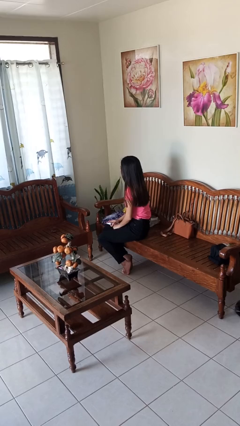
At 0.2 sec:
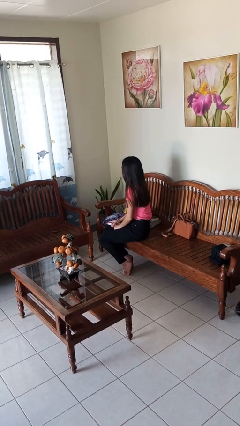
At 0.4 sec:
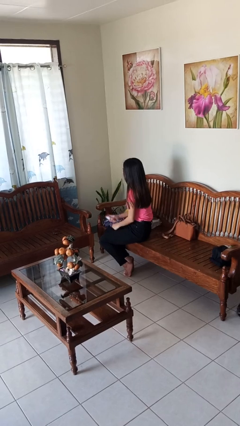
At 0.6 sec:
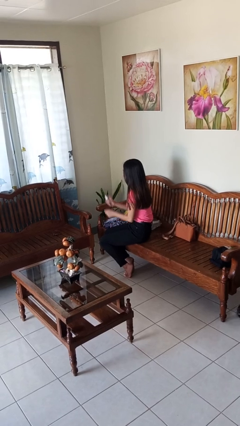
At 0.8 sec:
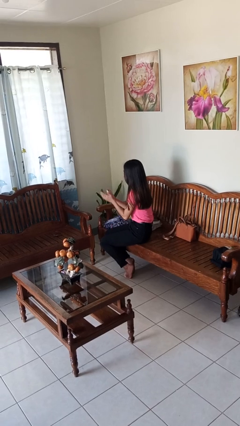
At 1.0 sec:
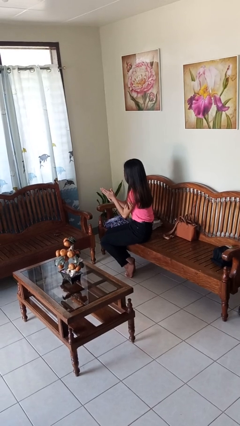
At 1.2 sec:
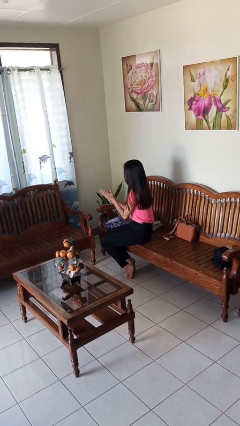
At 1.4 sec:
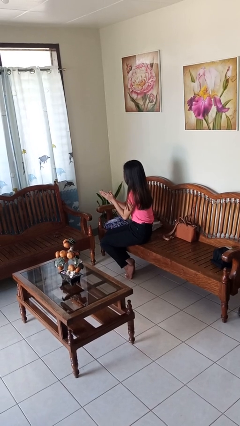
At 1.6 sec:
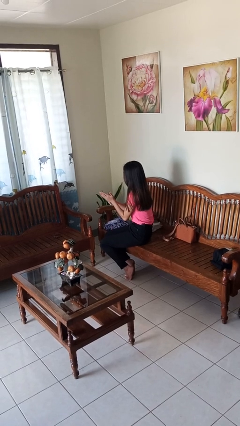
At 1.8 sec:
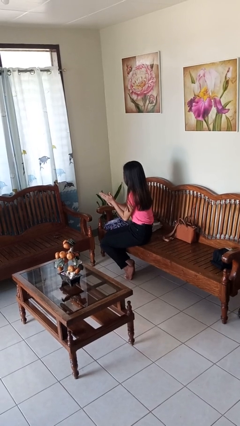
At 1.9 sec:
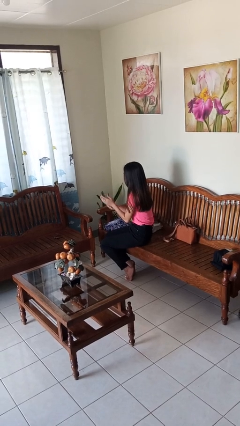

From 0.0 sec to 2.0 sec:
person sprays from bottle

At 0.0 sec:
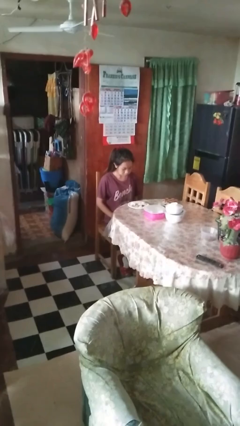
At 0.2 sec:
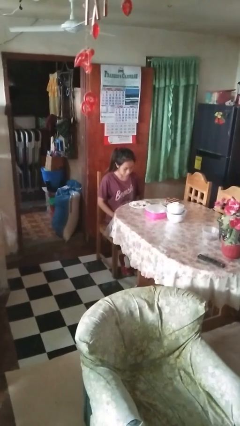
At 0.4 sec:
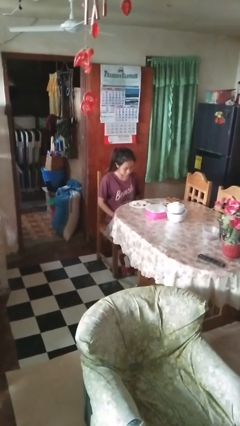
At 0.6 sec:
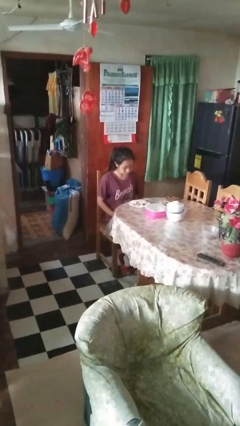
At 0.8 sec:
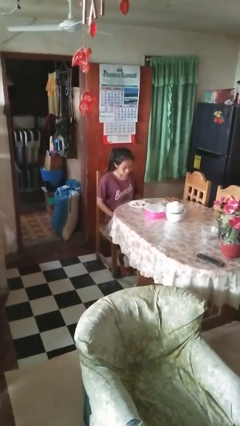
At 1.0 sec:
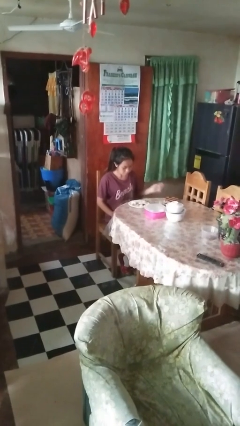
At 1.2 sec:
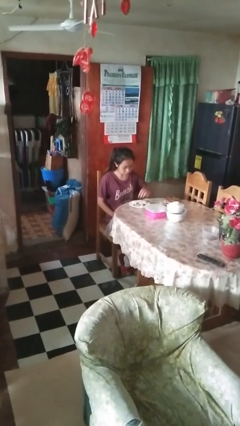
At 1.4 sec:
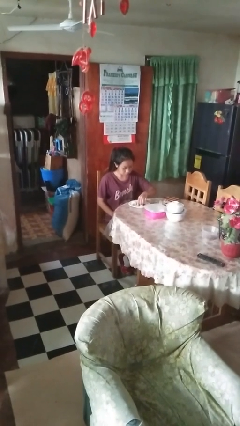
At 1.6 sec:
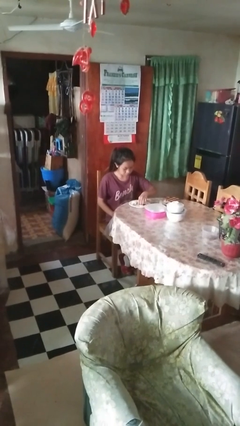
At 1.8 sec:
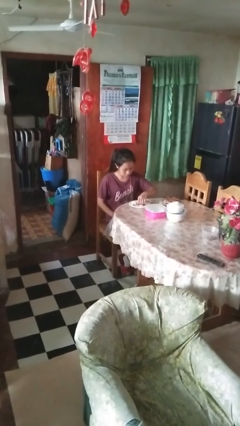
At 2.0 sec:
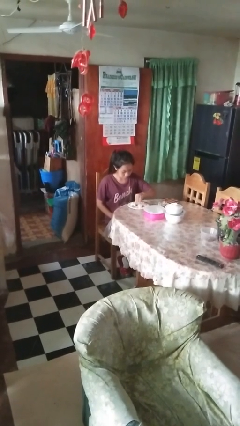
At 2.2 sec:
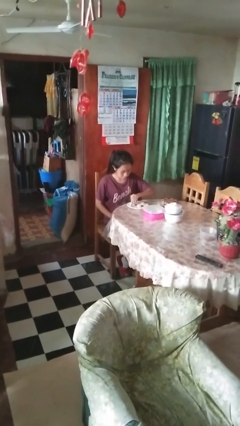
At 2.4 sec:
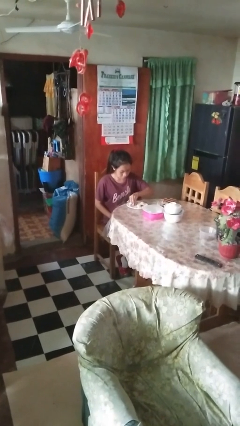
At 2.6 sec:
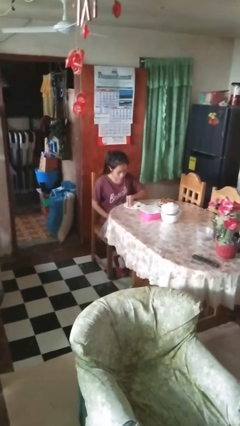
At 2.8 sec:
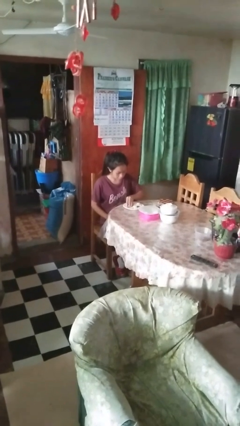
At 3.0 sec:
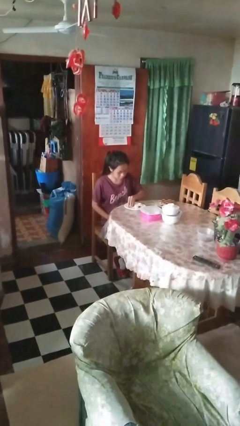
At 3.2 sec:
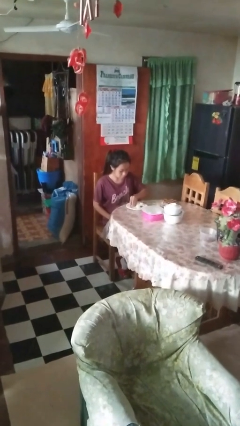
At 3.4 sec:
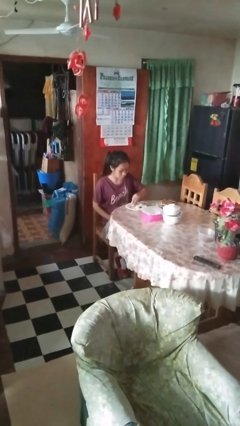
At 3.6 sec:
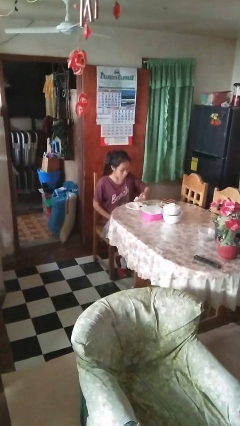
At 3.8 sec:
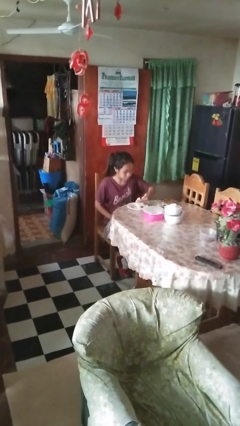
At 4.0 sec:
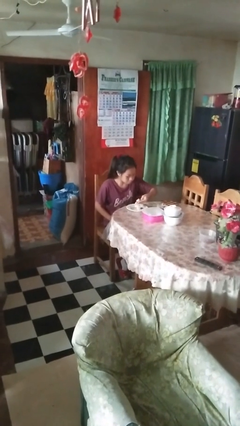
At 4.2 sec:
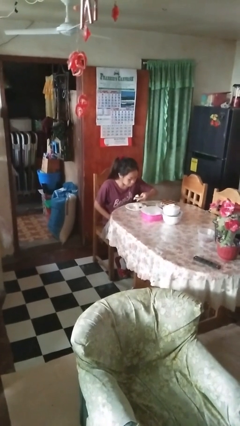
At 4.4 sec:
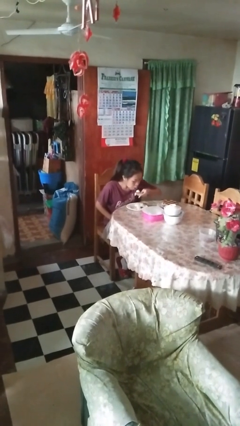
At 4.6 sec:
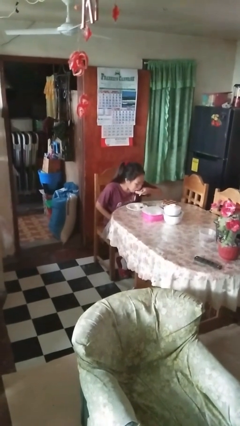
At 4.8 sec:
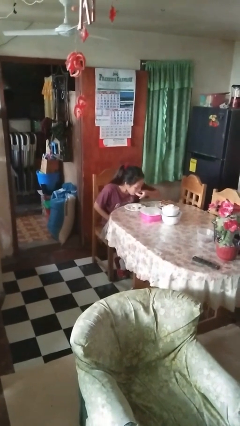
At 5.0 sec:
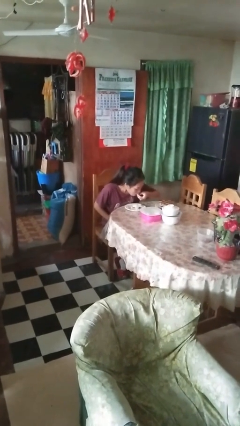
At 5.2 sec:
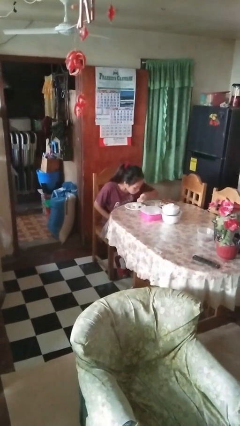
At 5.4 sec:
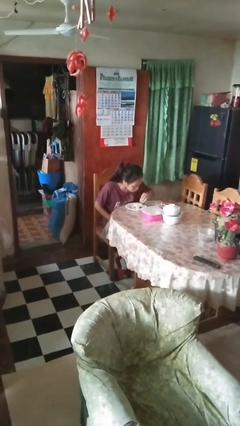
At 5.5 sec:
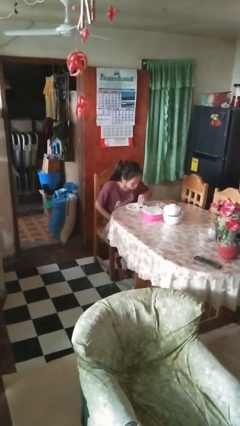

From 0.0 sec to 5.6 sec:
person eats with hands

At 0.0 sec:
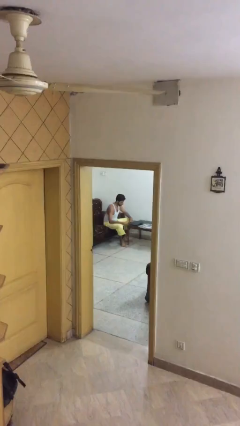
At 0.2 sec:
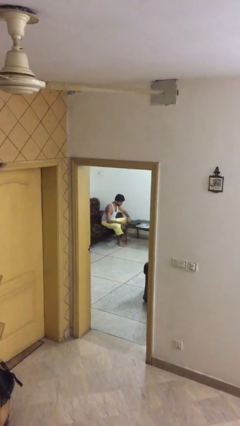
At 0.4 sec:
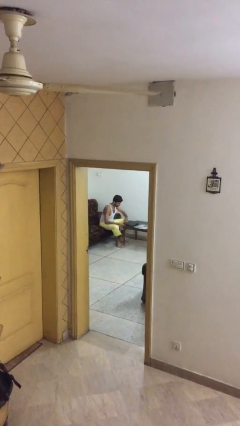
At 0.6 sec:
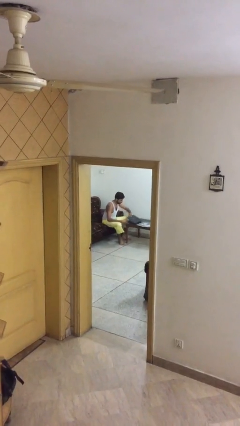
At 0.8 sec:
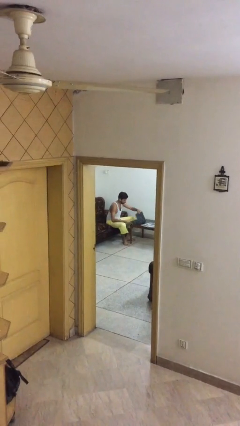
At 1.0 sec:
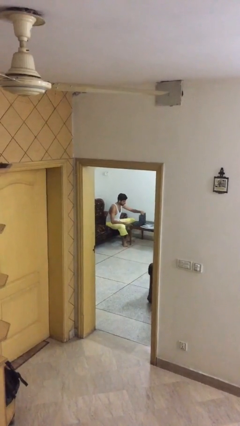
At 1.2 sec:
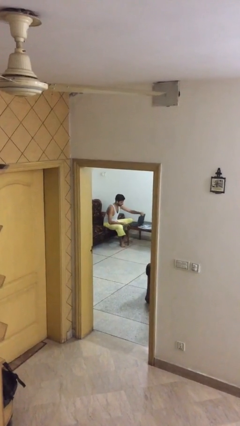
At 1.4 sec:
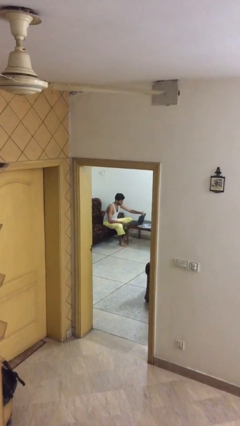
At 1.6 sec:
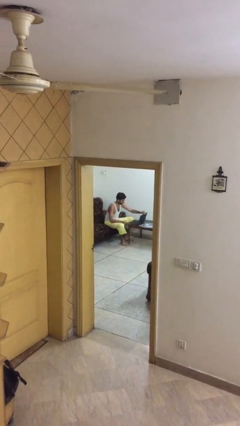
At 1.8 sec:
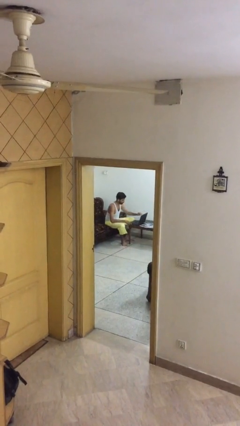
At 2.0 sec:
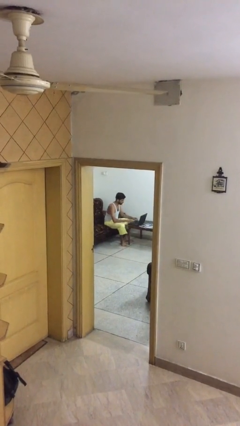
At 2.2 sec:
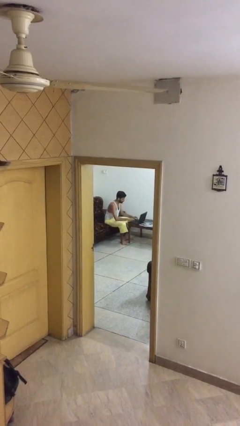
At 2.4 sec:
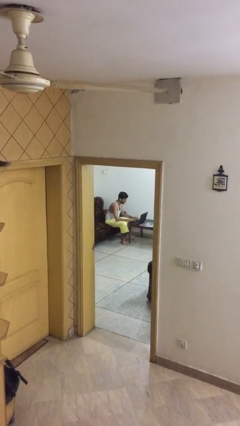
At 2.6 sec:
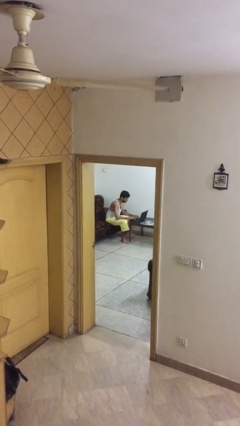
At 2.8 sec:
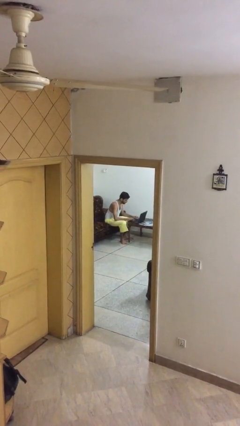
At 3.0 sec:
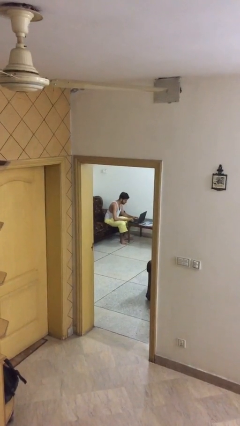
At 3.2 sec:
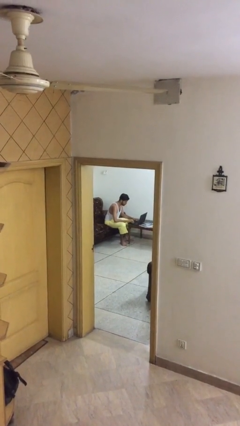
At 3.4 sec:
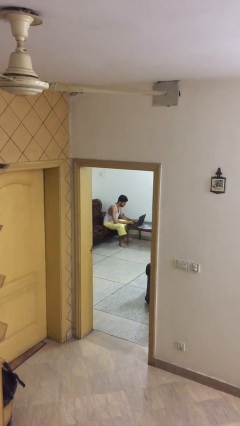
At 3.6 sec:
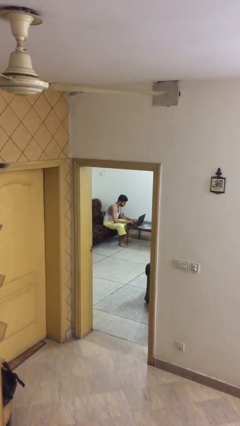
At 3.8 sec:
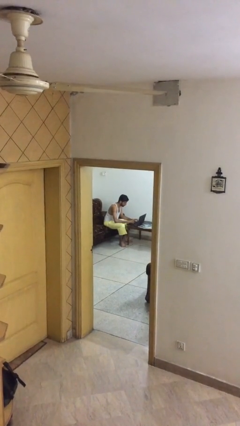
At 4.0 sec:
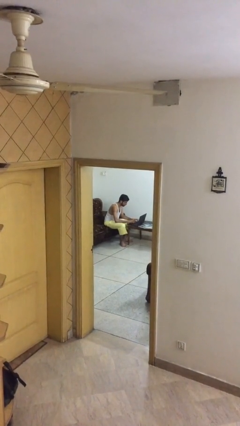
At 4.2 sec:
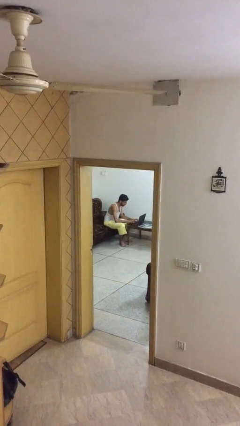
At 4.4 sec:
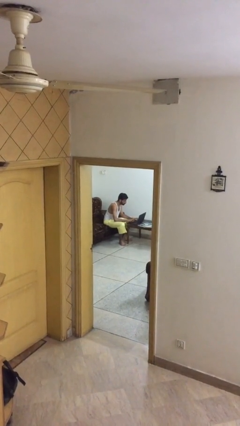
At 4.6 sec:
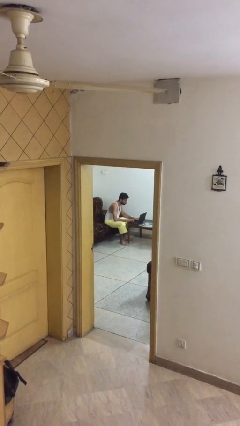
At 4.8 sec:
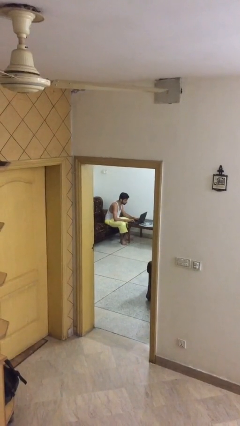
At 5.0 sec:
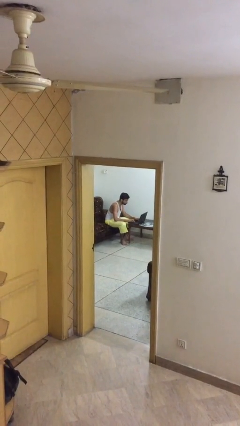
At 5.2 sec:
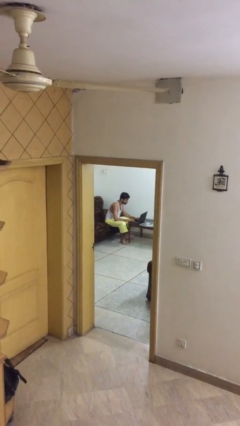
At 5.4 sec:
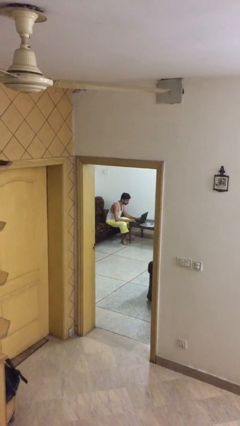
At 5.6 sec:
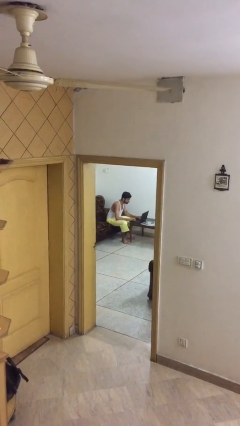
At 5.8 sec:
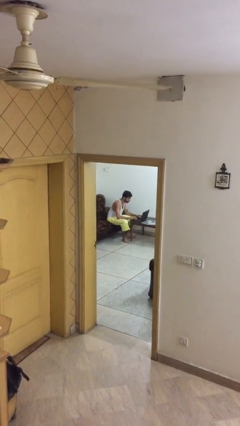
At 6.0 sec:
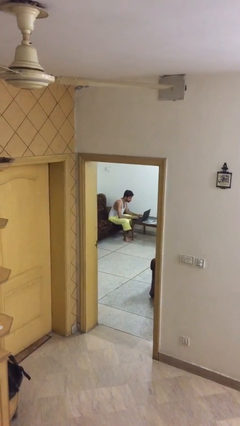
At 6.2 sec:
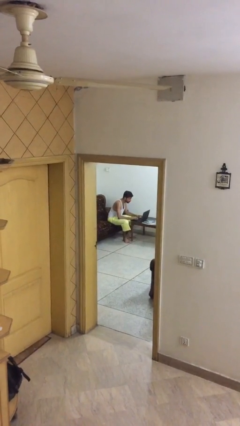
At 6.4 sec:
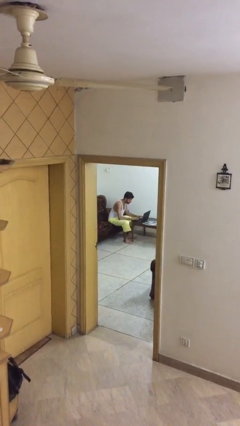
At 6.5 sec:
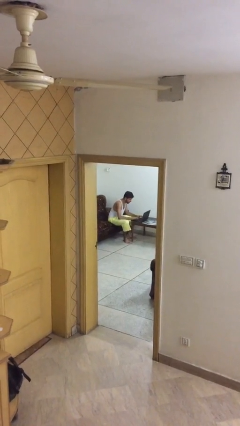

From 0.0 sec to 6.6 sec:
person interacts with laptop

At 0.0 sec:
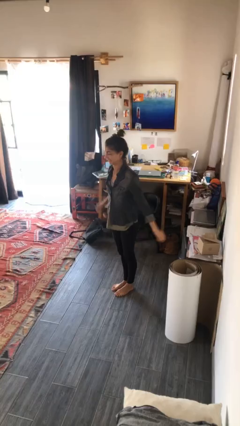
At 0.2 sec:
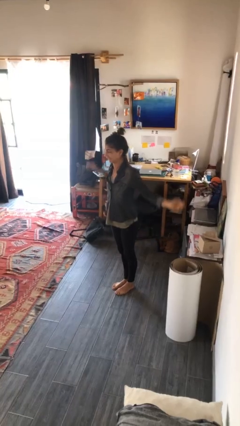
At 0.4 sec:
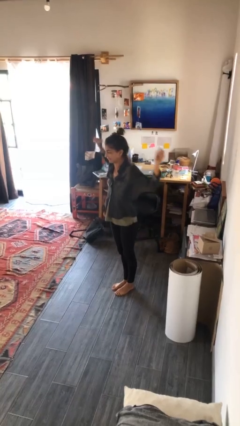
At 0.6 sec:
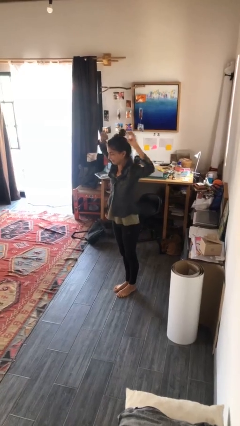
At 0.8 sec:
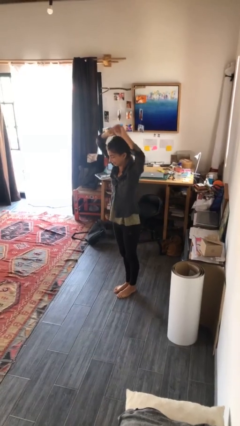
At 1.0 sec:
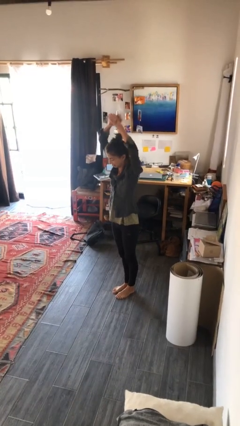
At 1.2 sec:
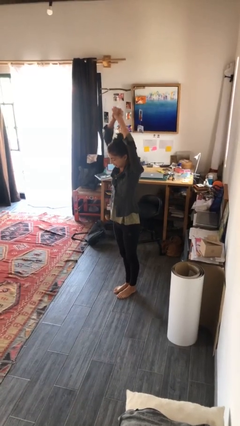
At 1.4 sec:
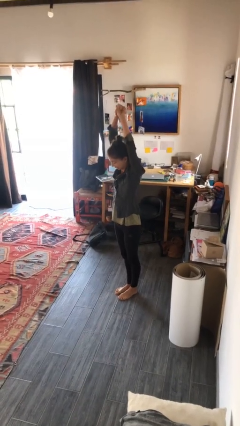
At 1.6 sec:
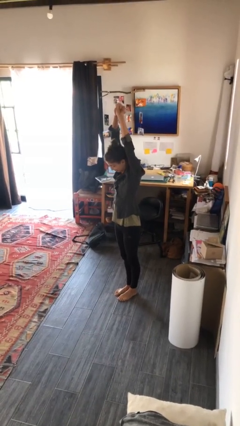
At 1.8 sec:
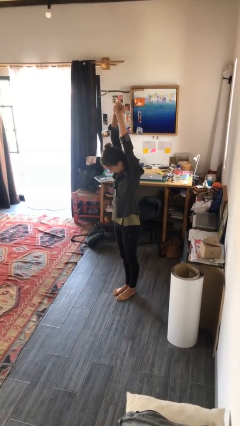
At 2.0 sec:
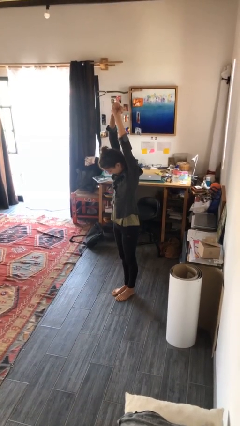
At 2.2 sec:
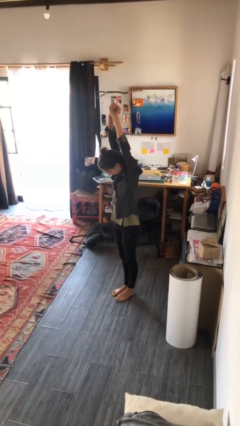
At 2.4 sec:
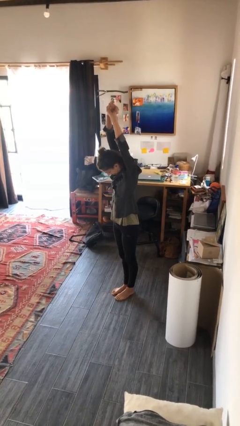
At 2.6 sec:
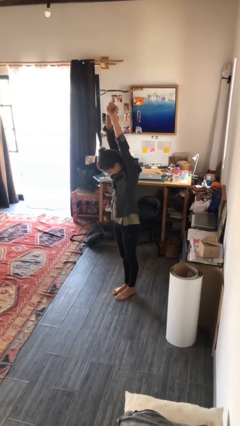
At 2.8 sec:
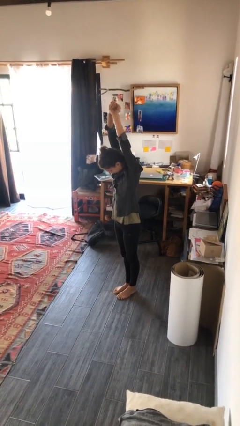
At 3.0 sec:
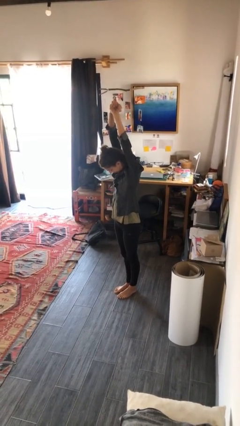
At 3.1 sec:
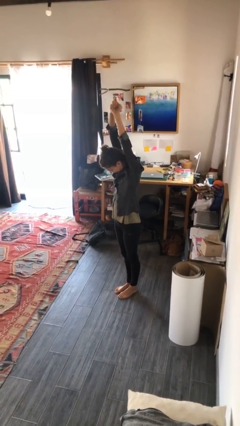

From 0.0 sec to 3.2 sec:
person stretches arms over head

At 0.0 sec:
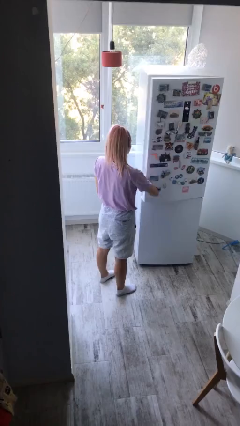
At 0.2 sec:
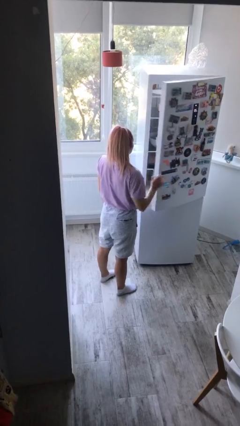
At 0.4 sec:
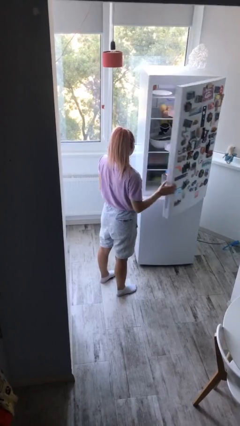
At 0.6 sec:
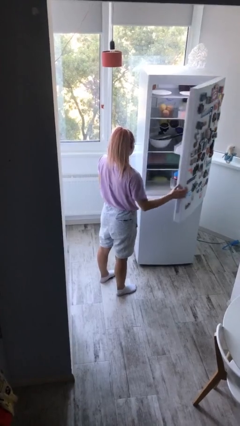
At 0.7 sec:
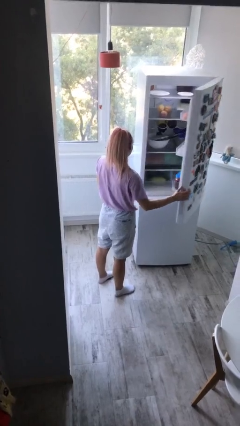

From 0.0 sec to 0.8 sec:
person opens refrigerator
